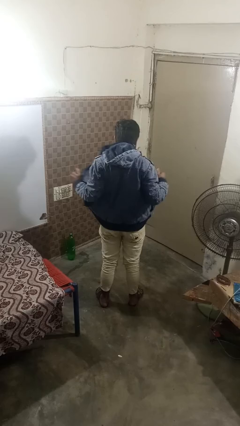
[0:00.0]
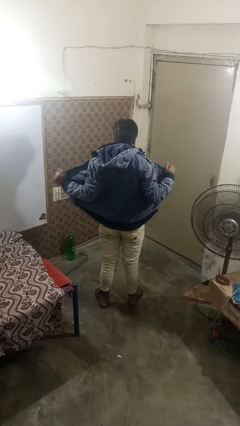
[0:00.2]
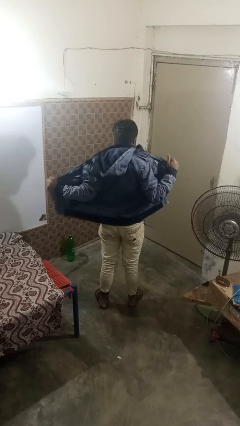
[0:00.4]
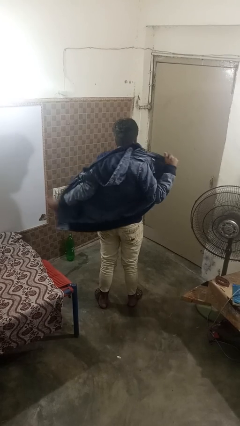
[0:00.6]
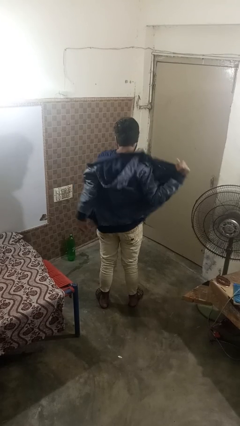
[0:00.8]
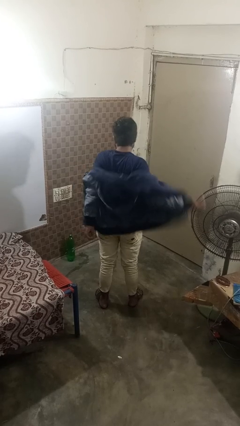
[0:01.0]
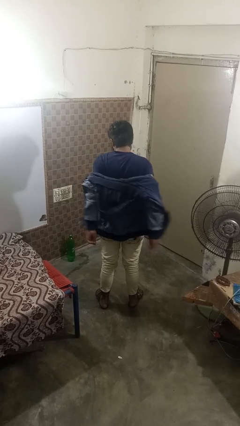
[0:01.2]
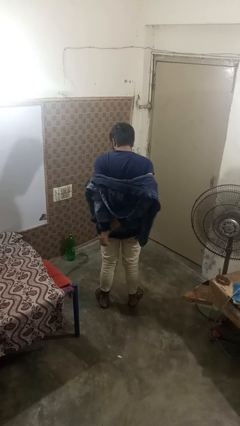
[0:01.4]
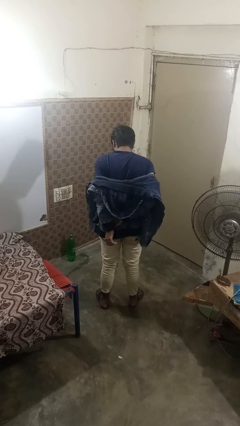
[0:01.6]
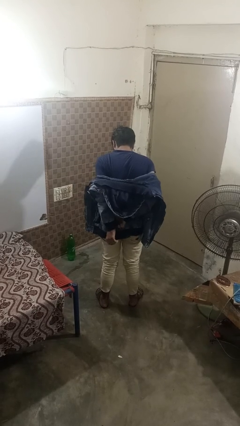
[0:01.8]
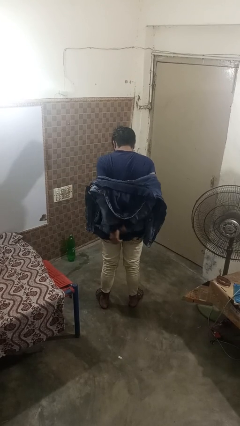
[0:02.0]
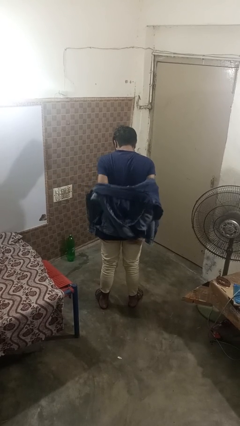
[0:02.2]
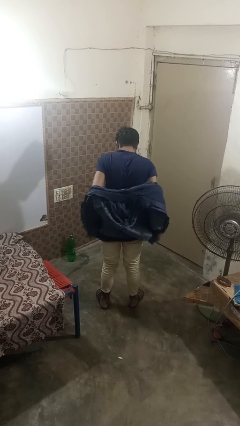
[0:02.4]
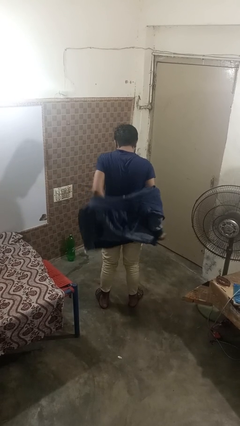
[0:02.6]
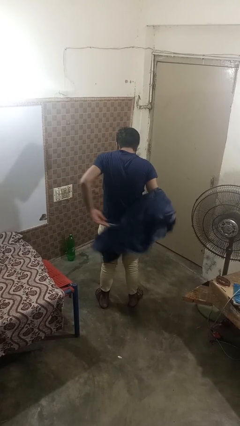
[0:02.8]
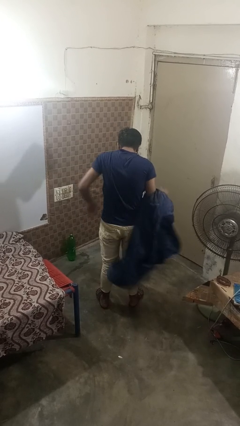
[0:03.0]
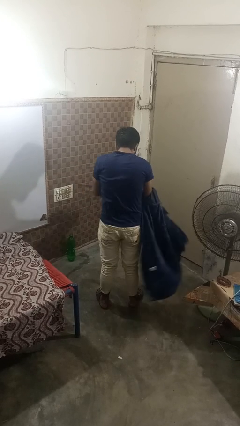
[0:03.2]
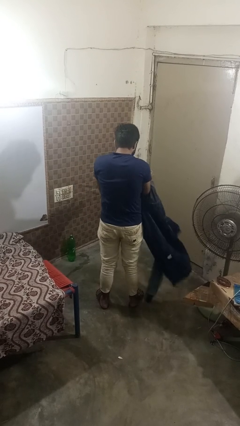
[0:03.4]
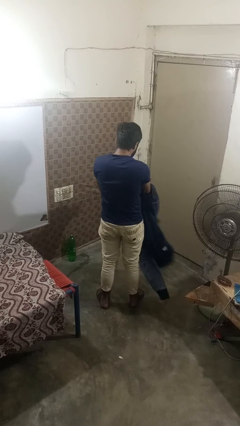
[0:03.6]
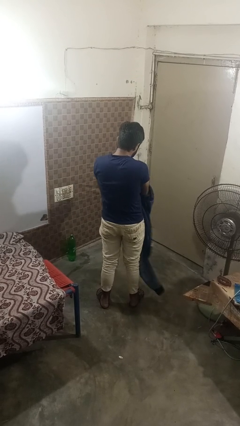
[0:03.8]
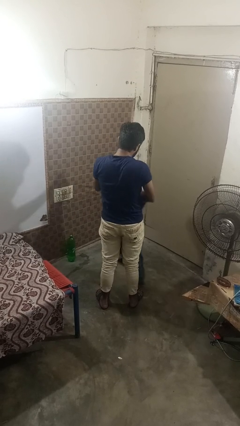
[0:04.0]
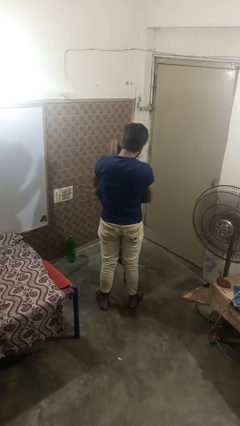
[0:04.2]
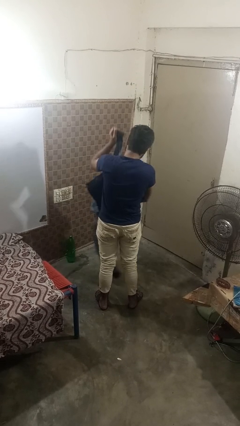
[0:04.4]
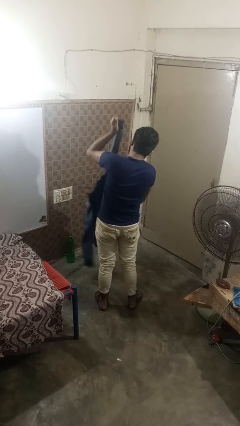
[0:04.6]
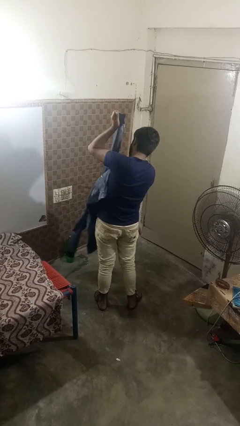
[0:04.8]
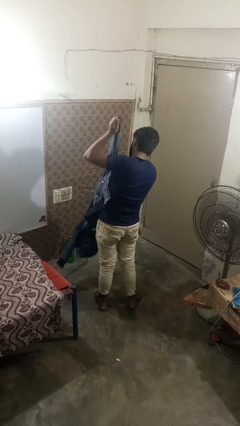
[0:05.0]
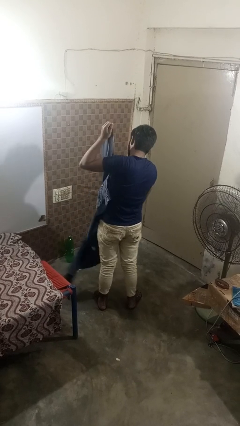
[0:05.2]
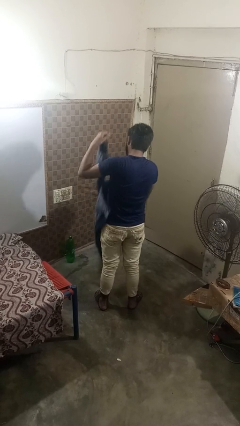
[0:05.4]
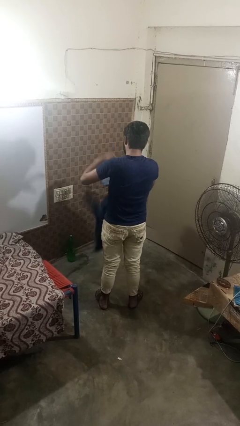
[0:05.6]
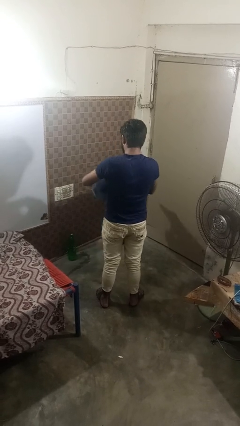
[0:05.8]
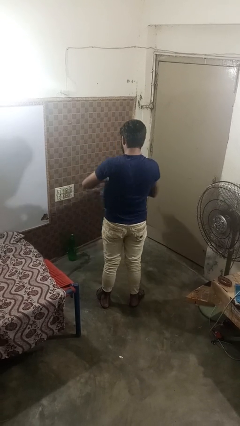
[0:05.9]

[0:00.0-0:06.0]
person takes off jacket

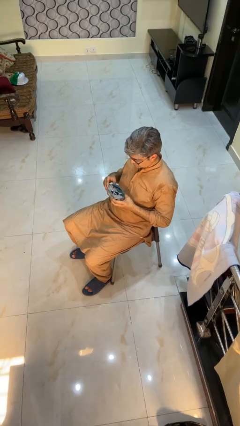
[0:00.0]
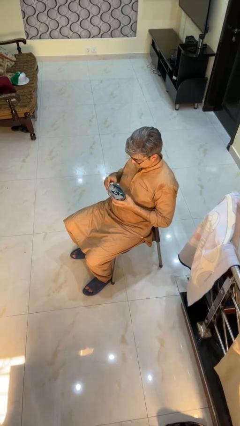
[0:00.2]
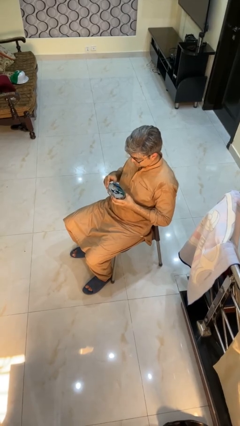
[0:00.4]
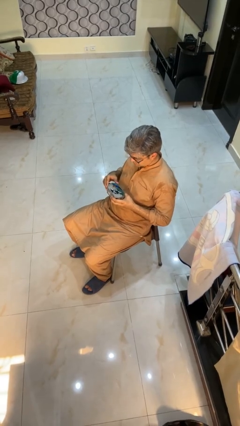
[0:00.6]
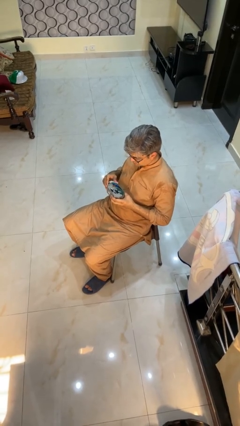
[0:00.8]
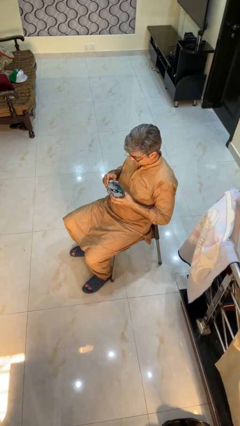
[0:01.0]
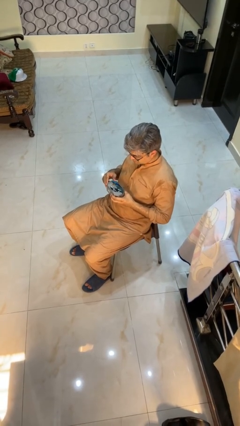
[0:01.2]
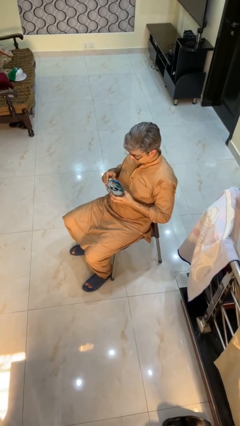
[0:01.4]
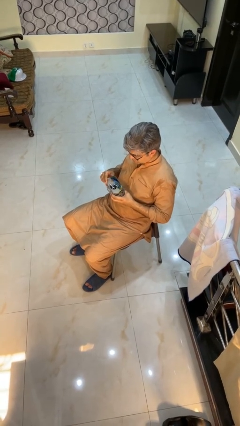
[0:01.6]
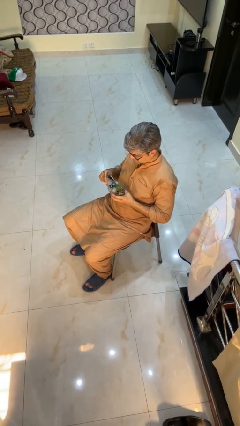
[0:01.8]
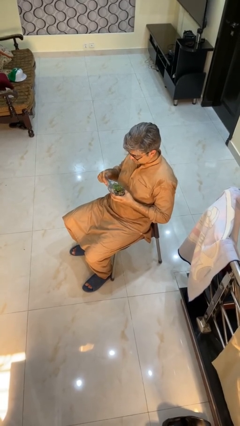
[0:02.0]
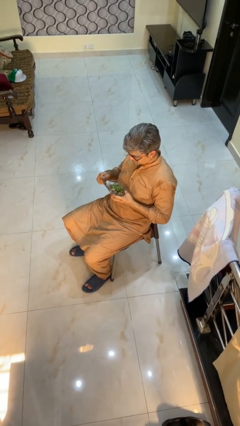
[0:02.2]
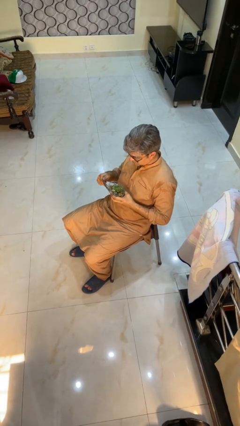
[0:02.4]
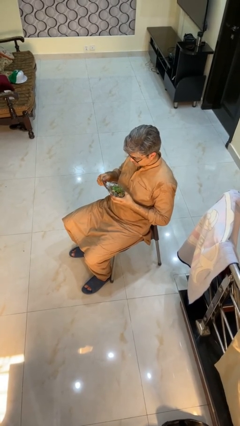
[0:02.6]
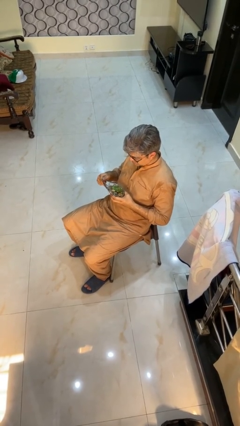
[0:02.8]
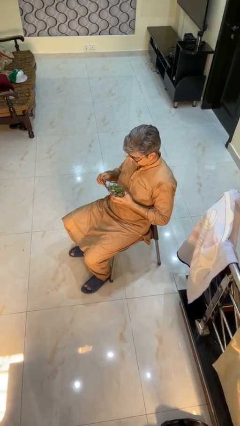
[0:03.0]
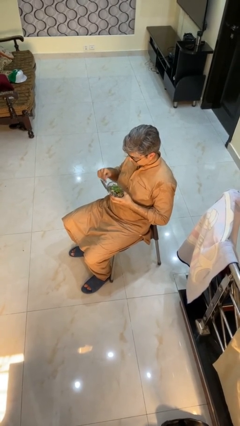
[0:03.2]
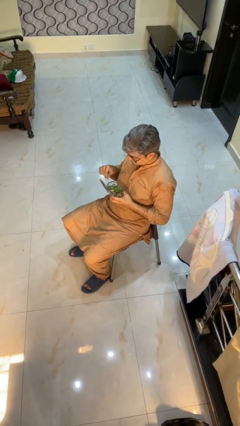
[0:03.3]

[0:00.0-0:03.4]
person opens jewelry box

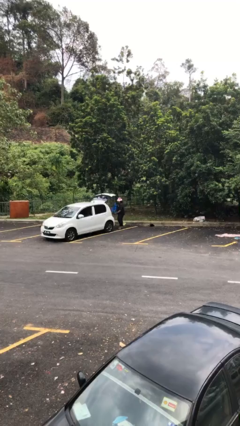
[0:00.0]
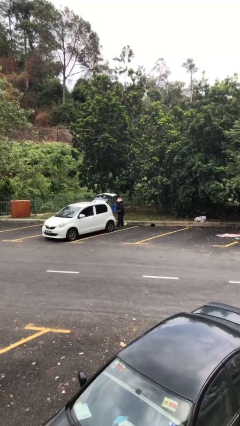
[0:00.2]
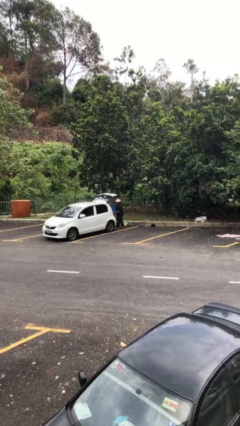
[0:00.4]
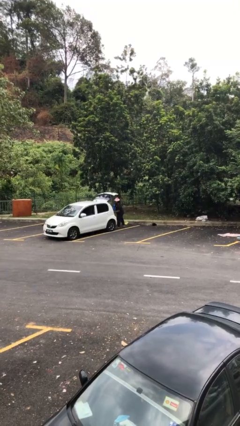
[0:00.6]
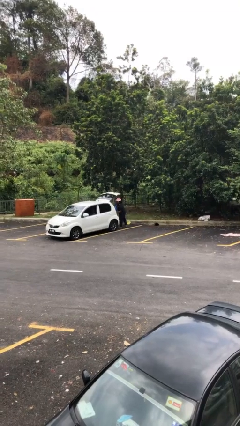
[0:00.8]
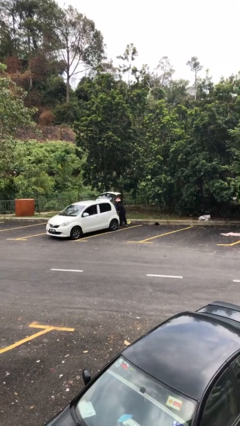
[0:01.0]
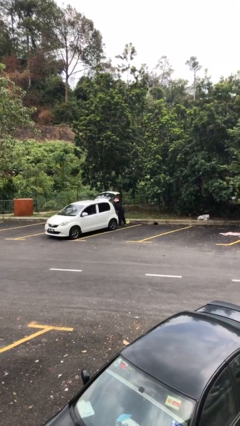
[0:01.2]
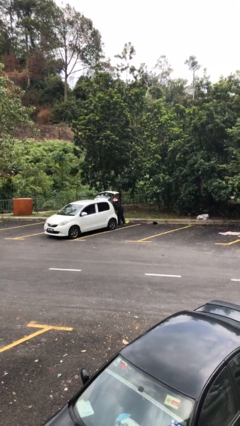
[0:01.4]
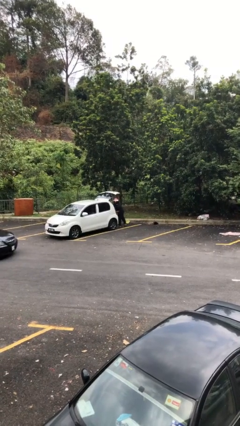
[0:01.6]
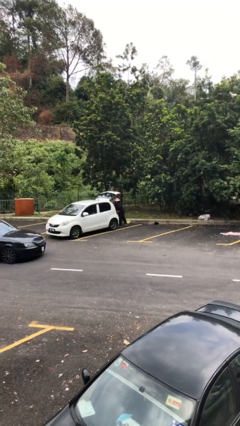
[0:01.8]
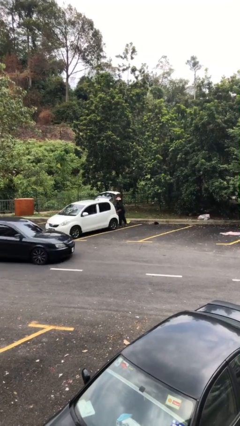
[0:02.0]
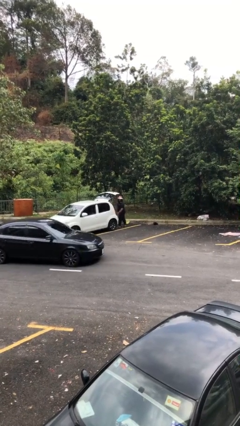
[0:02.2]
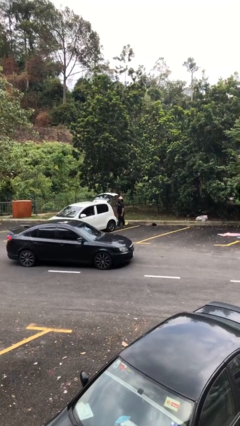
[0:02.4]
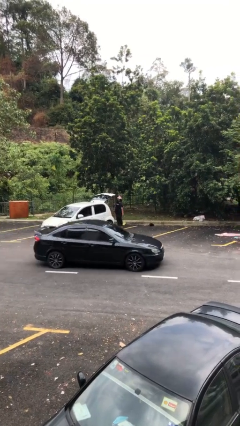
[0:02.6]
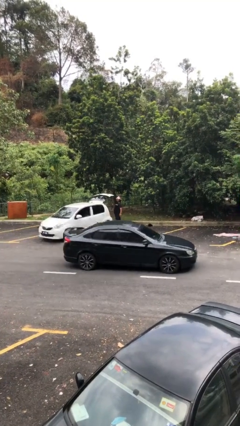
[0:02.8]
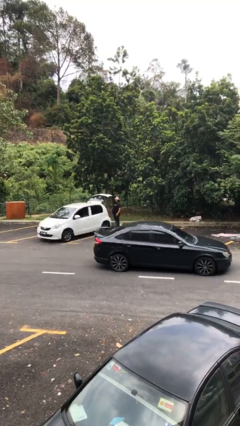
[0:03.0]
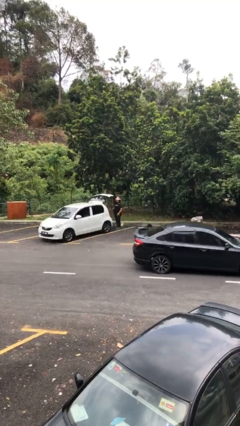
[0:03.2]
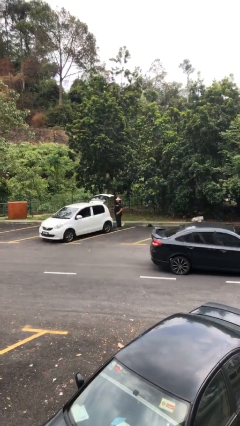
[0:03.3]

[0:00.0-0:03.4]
person loads car

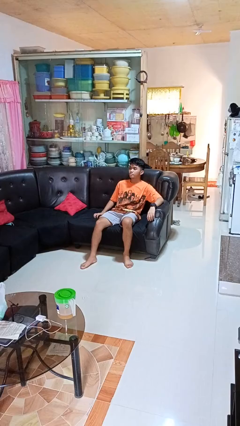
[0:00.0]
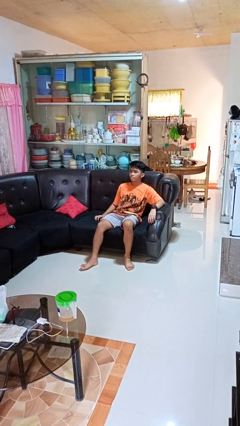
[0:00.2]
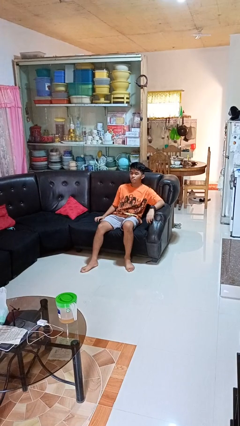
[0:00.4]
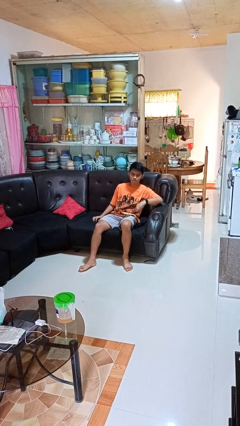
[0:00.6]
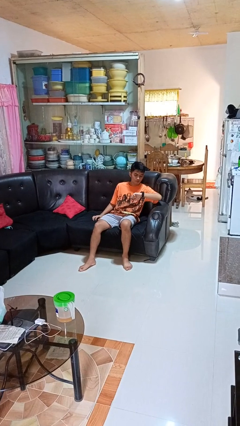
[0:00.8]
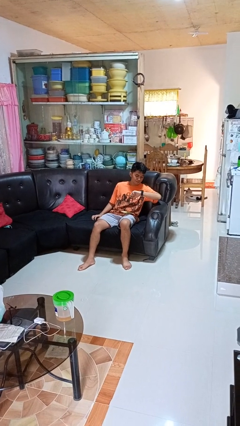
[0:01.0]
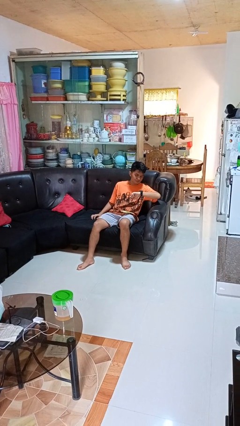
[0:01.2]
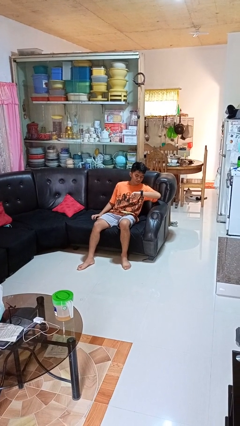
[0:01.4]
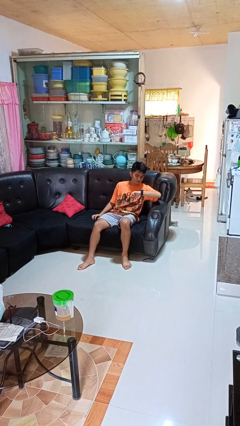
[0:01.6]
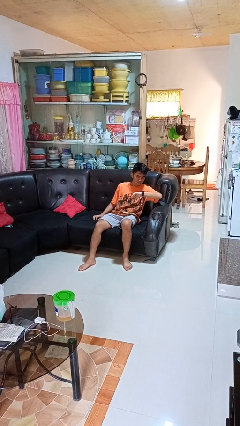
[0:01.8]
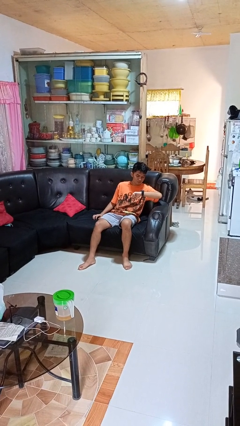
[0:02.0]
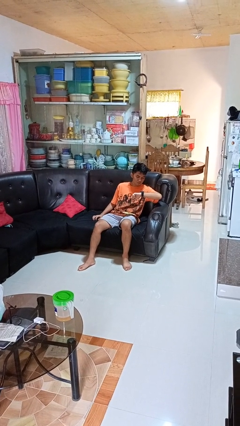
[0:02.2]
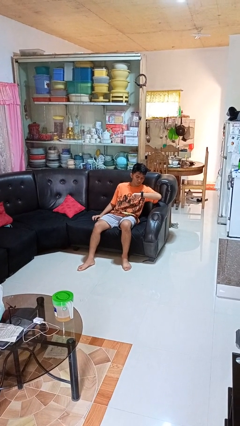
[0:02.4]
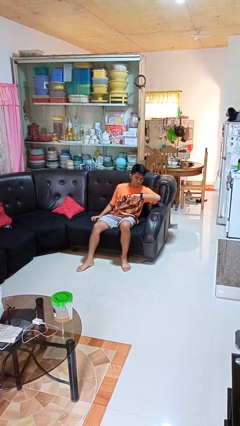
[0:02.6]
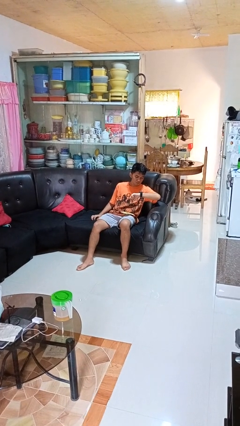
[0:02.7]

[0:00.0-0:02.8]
person looks at wristwatch

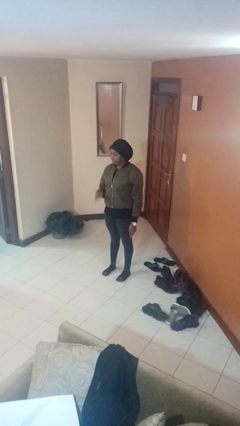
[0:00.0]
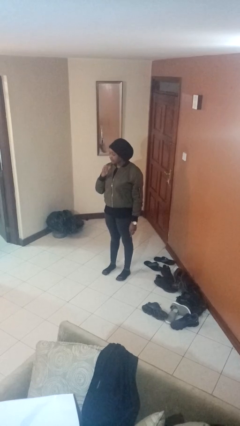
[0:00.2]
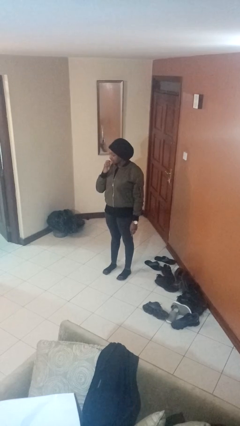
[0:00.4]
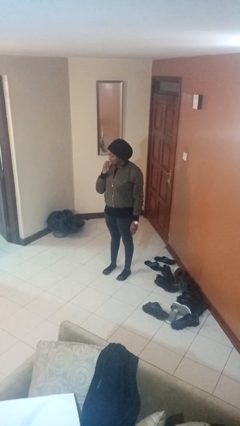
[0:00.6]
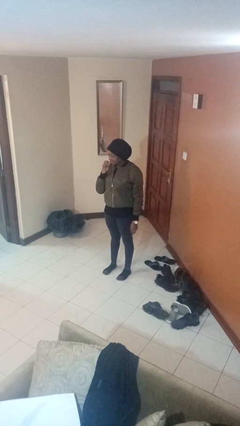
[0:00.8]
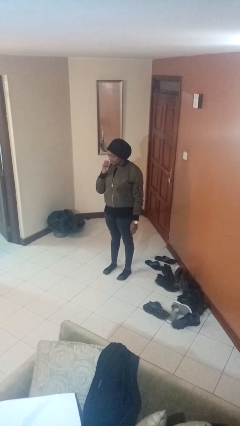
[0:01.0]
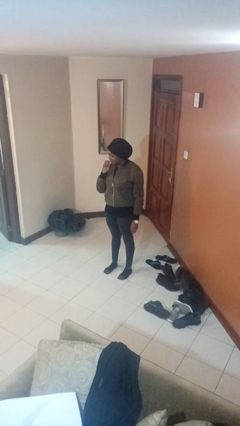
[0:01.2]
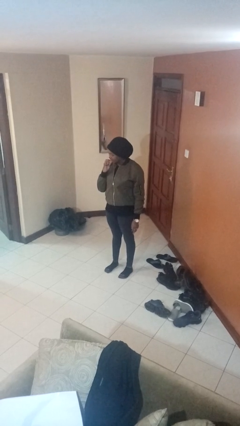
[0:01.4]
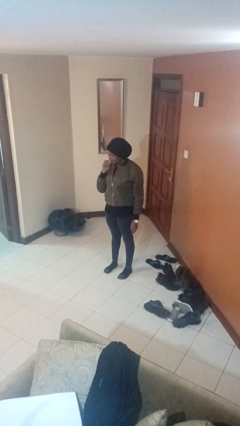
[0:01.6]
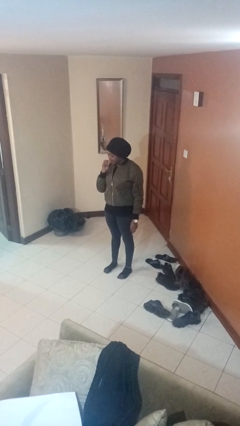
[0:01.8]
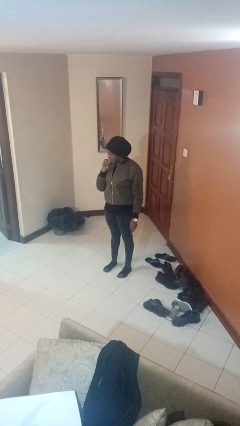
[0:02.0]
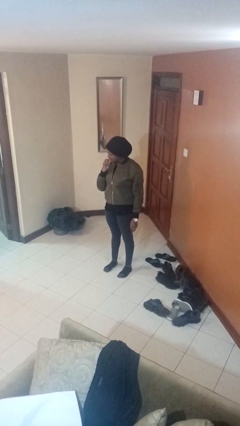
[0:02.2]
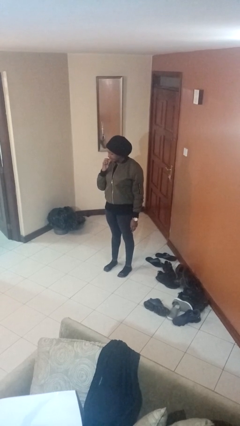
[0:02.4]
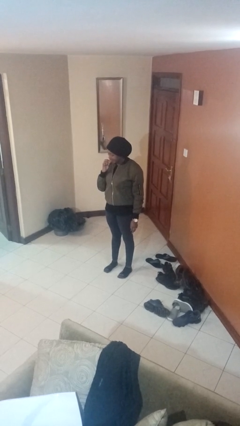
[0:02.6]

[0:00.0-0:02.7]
person applies lip makeup
